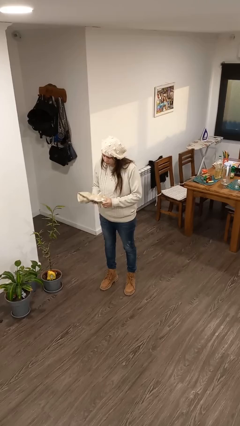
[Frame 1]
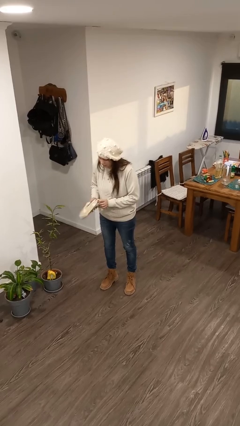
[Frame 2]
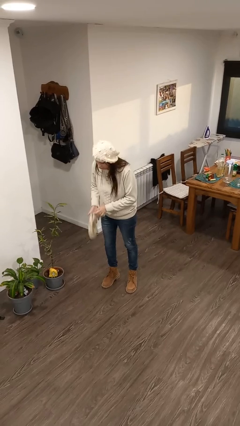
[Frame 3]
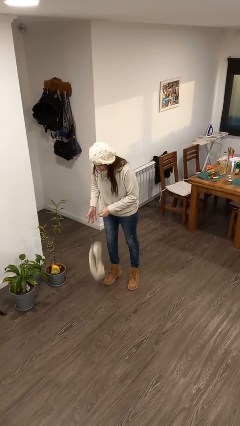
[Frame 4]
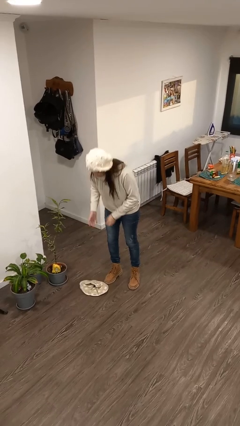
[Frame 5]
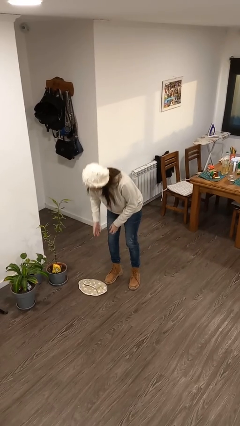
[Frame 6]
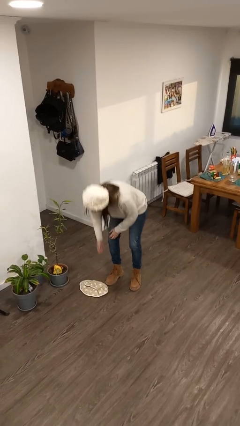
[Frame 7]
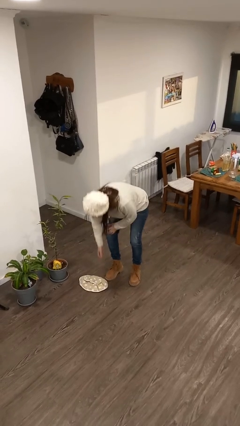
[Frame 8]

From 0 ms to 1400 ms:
person drops object

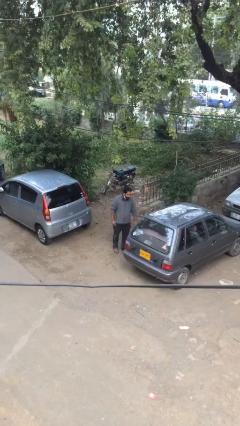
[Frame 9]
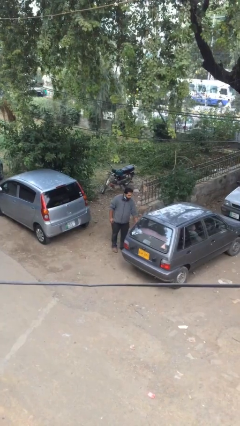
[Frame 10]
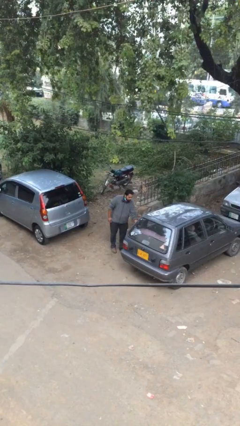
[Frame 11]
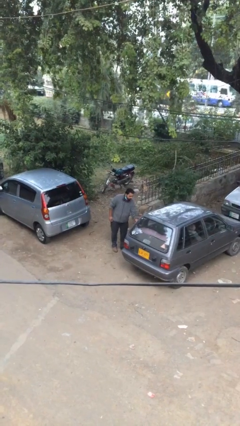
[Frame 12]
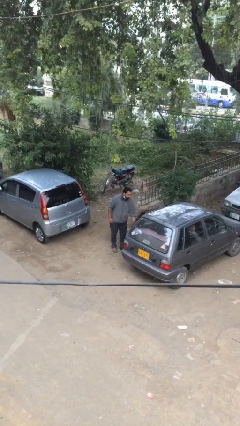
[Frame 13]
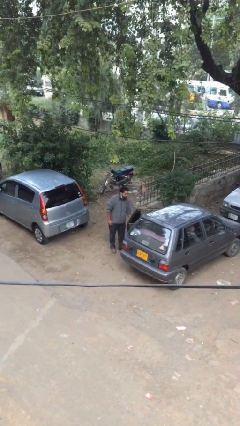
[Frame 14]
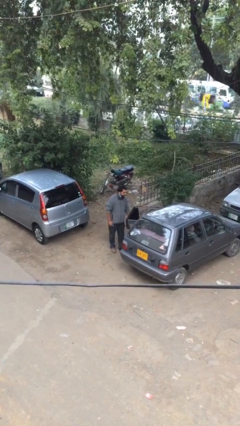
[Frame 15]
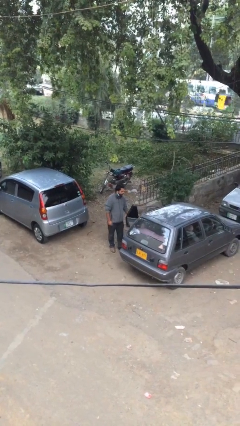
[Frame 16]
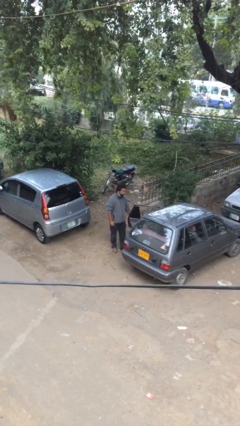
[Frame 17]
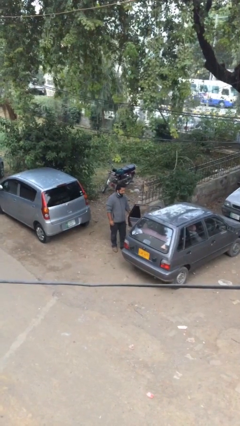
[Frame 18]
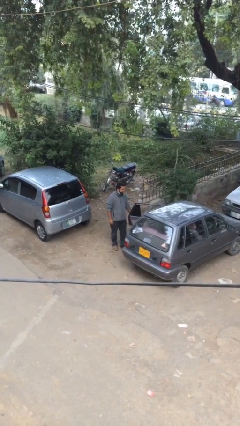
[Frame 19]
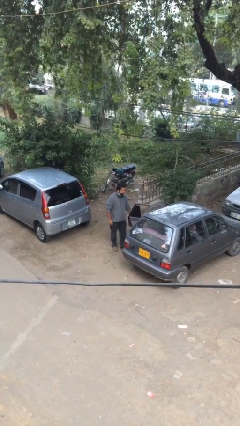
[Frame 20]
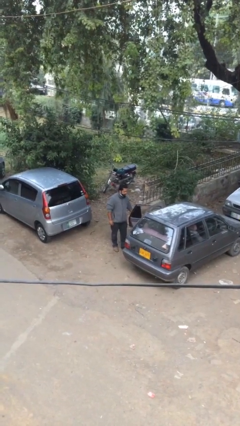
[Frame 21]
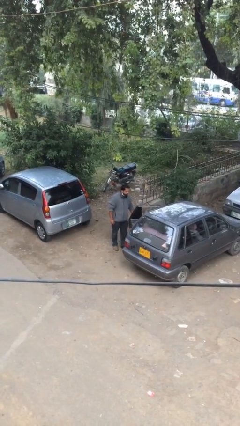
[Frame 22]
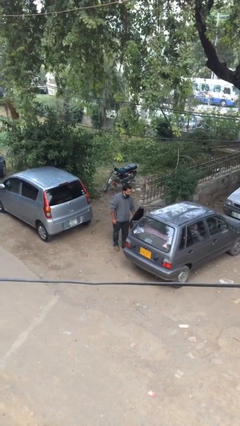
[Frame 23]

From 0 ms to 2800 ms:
person opens car door

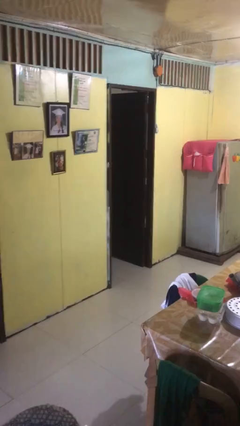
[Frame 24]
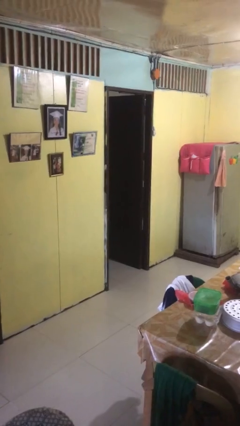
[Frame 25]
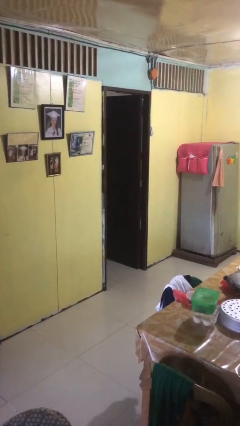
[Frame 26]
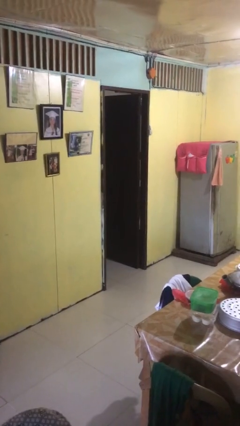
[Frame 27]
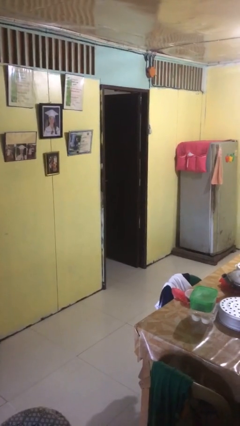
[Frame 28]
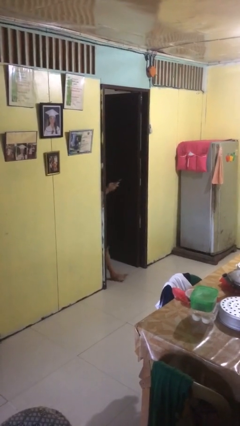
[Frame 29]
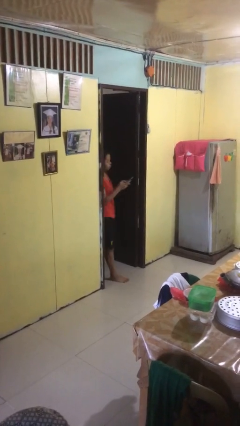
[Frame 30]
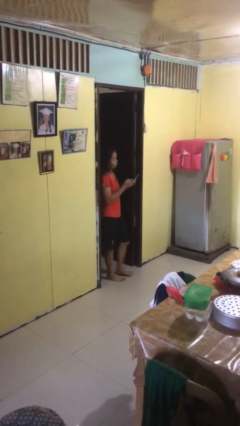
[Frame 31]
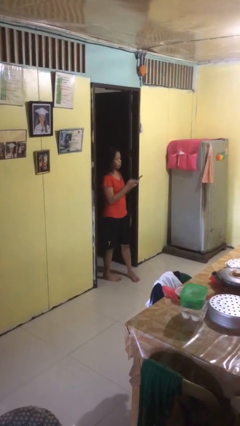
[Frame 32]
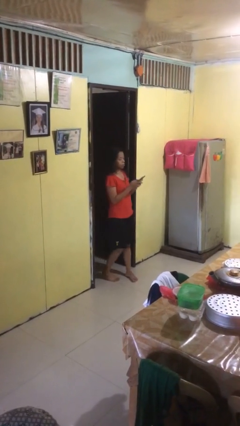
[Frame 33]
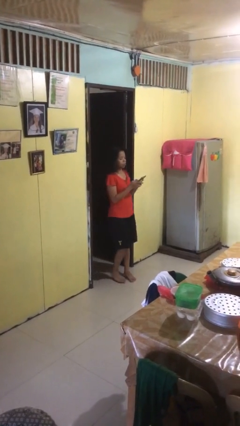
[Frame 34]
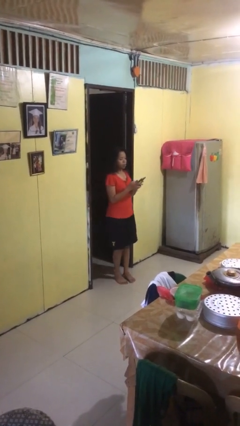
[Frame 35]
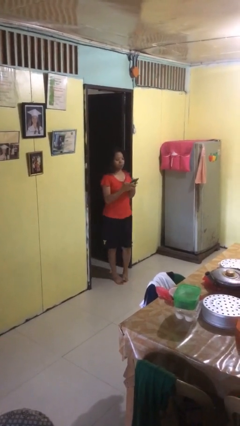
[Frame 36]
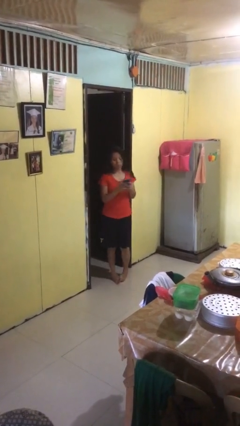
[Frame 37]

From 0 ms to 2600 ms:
person enters scene through structure

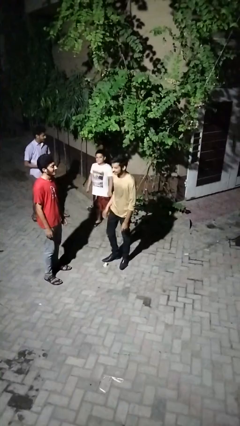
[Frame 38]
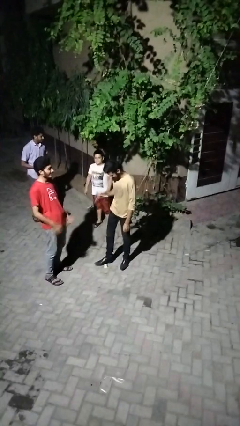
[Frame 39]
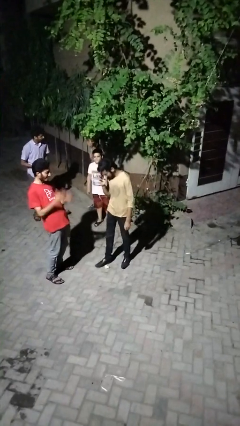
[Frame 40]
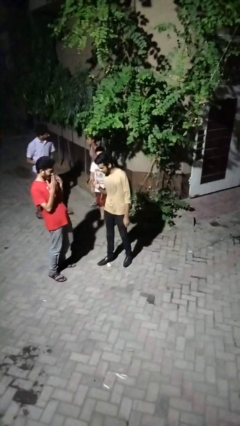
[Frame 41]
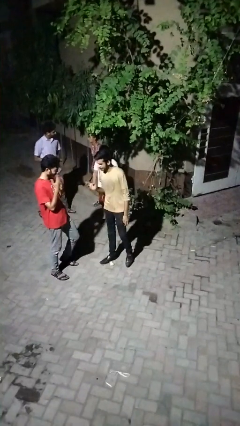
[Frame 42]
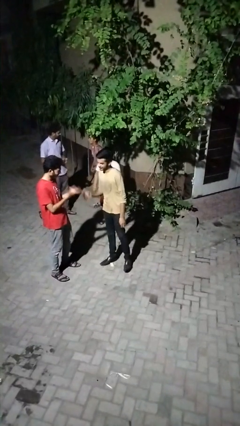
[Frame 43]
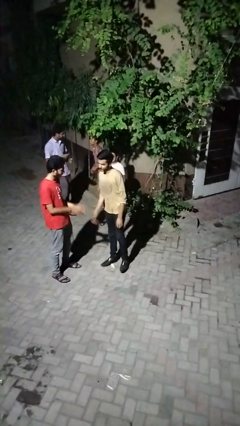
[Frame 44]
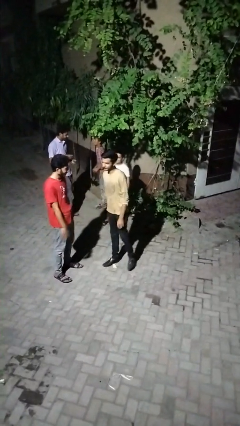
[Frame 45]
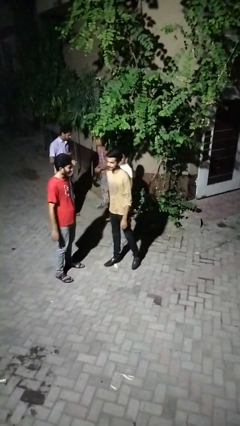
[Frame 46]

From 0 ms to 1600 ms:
person laughs with person

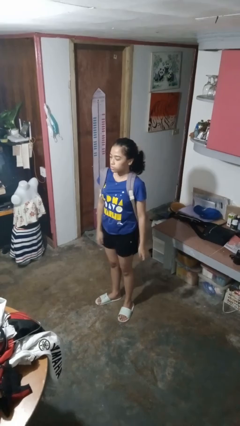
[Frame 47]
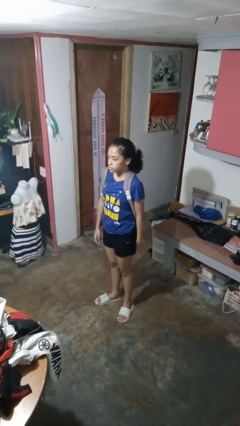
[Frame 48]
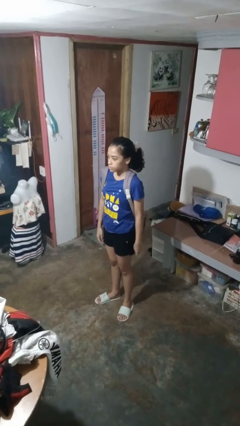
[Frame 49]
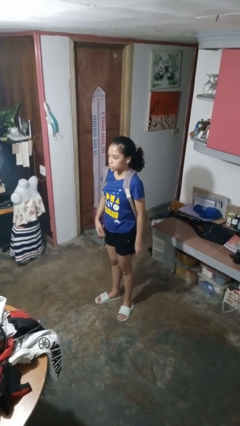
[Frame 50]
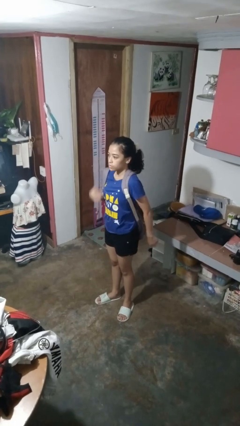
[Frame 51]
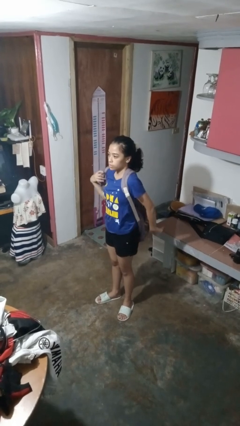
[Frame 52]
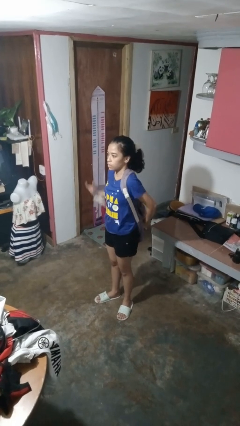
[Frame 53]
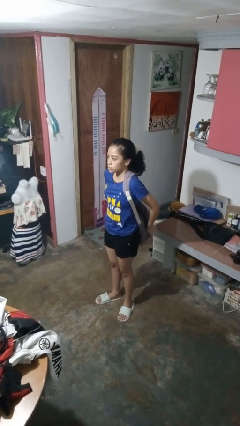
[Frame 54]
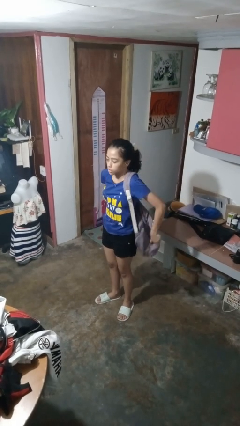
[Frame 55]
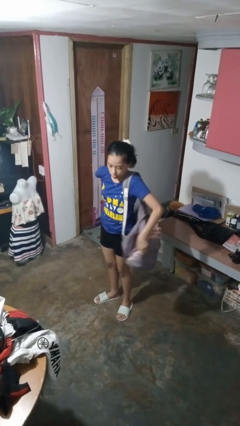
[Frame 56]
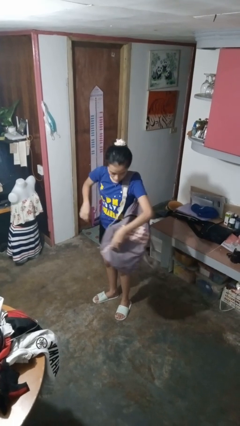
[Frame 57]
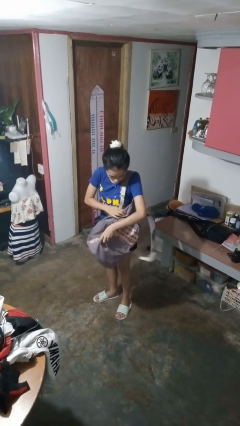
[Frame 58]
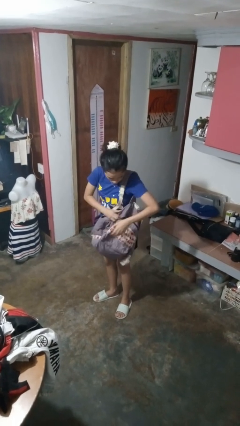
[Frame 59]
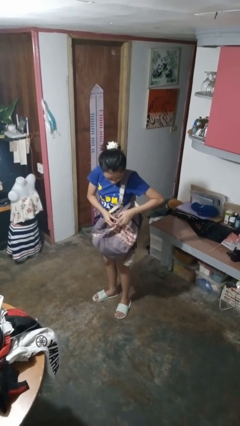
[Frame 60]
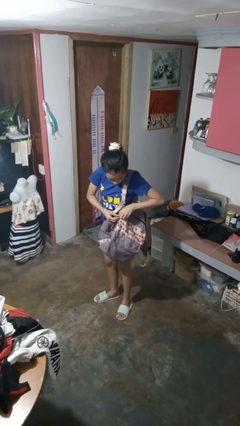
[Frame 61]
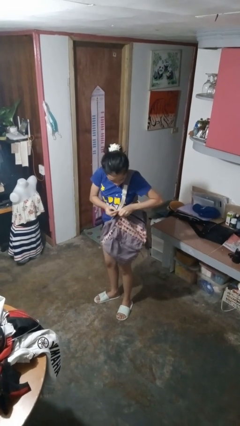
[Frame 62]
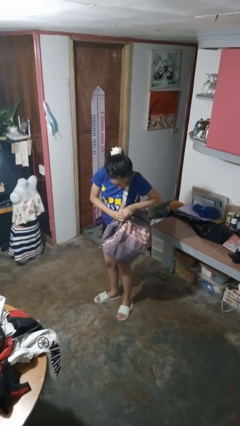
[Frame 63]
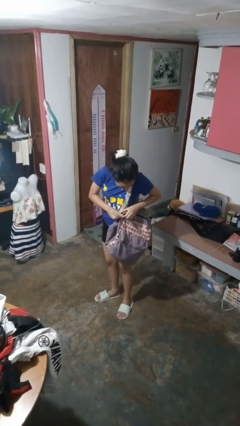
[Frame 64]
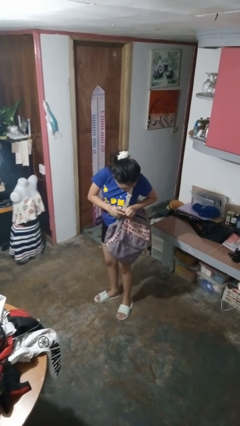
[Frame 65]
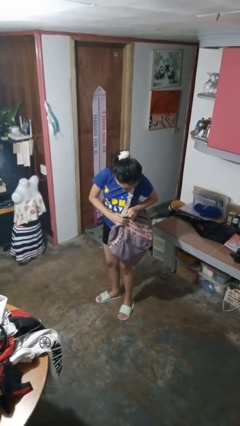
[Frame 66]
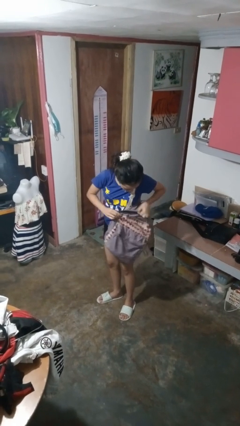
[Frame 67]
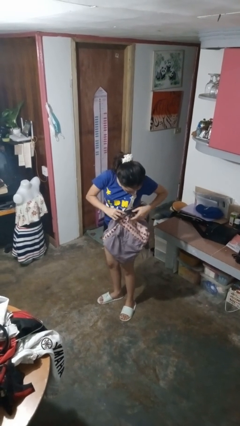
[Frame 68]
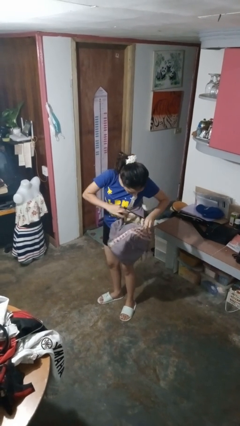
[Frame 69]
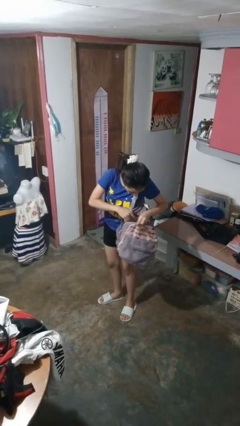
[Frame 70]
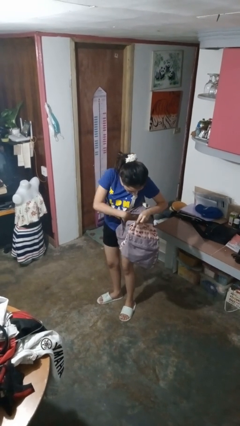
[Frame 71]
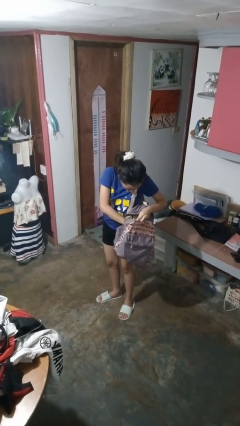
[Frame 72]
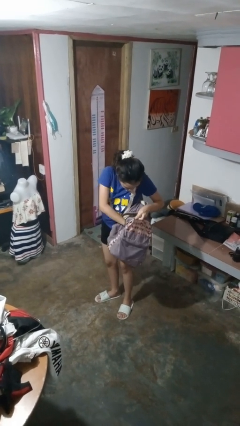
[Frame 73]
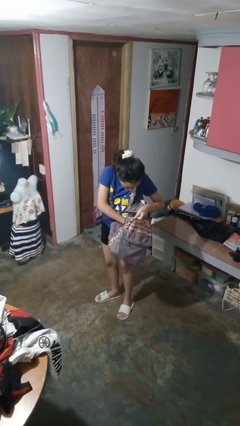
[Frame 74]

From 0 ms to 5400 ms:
person searches in backpack

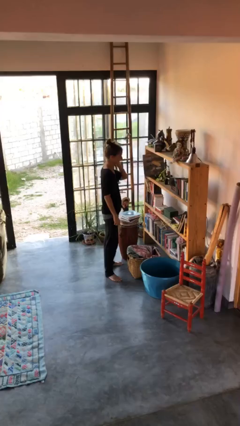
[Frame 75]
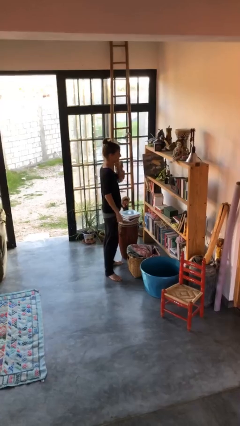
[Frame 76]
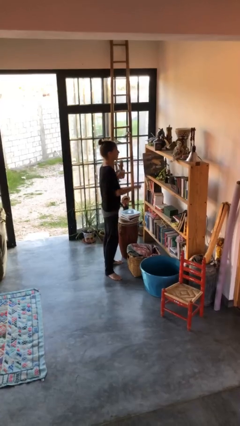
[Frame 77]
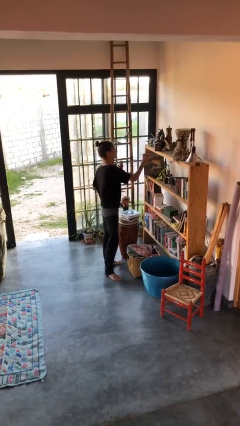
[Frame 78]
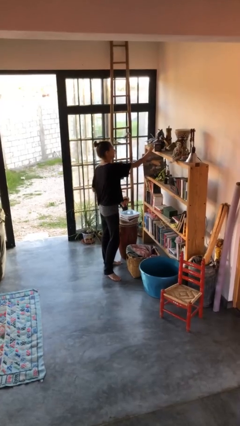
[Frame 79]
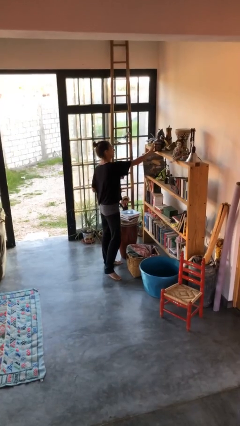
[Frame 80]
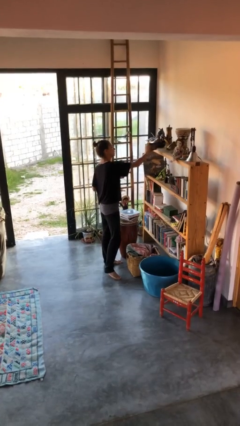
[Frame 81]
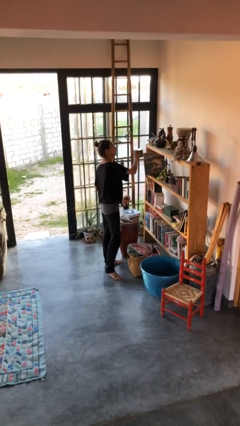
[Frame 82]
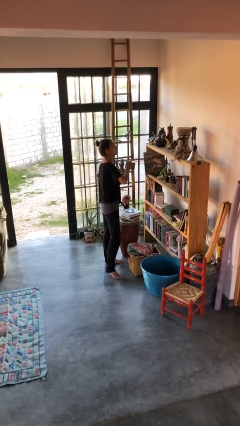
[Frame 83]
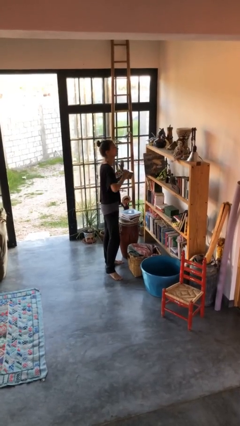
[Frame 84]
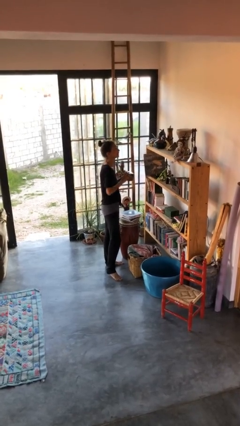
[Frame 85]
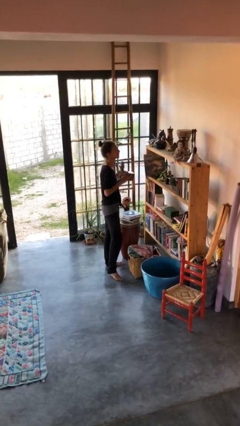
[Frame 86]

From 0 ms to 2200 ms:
person picks up object from countertop

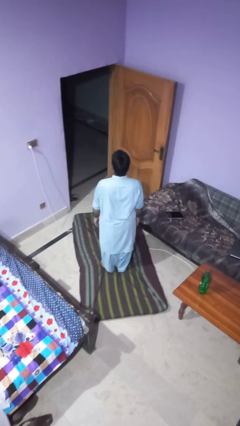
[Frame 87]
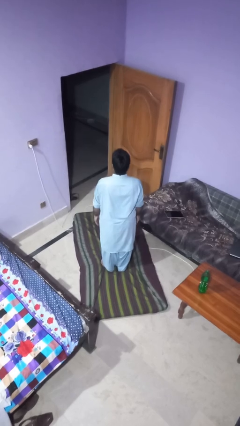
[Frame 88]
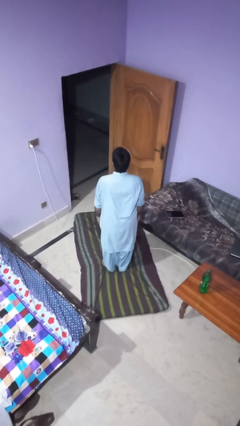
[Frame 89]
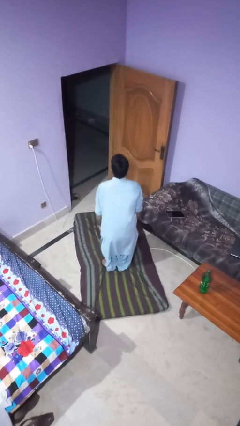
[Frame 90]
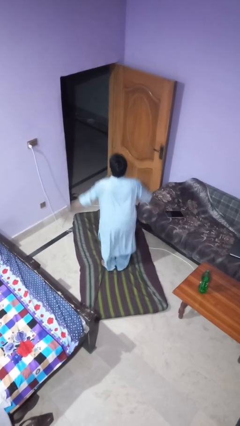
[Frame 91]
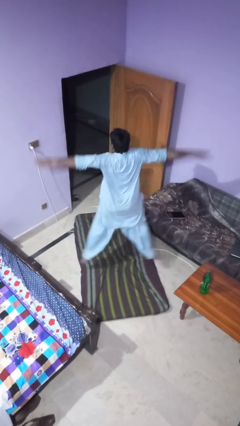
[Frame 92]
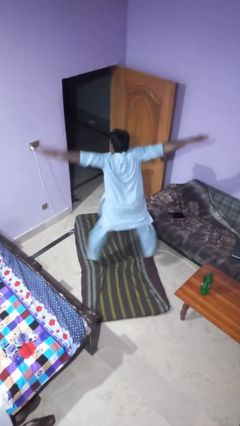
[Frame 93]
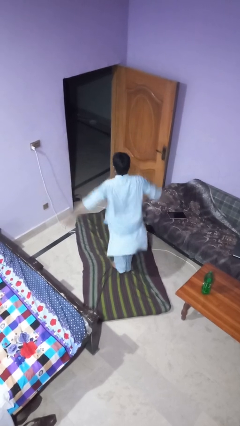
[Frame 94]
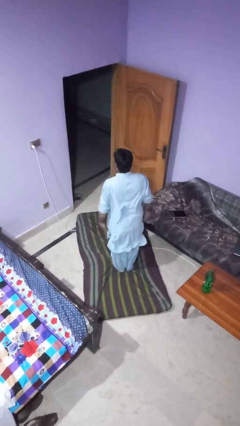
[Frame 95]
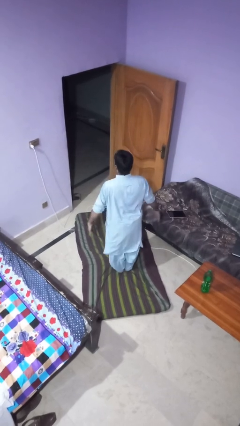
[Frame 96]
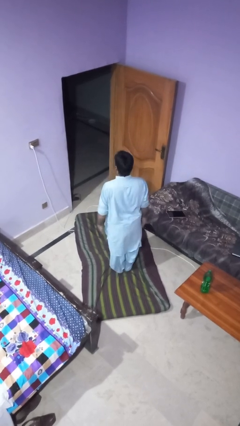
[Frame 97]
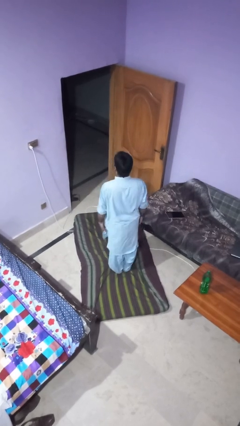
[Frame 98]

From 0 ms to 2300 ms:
person exercises with jumping jacks
